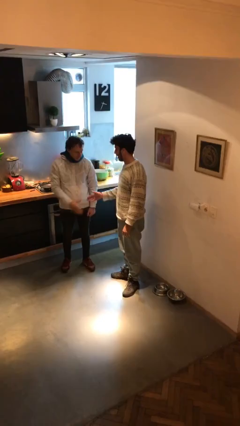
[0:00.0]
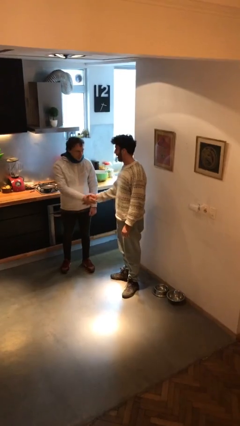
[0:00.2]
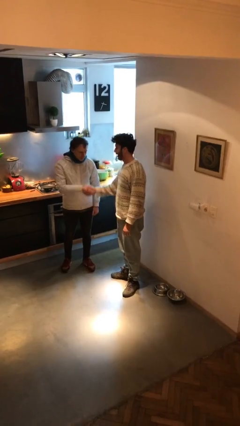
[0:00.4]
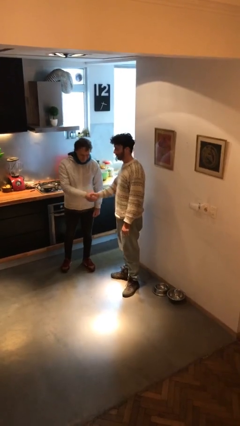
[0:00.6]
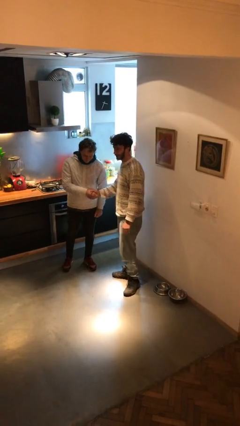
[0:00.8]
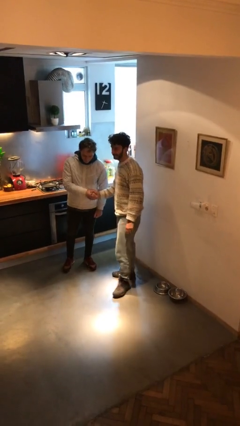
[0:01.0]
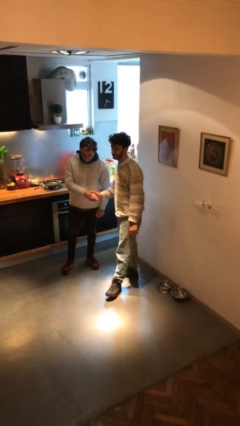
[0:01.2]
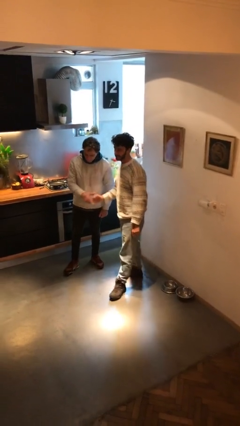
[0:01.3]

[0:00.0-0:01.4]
person shakes hand

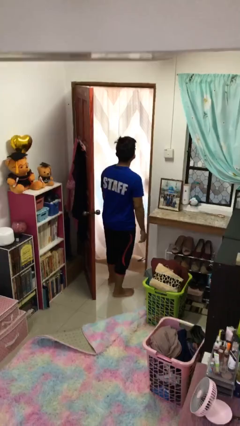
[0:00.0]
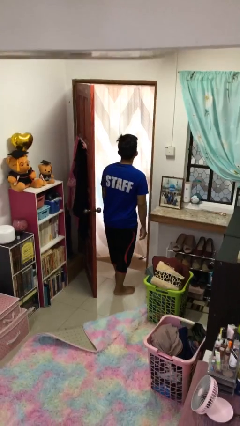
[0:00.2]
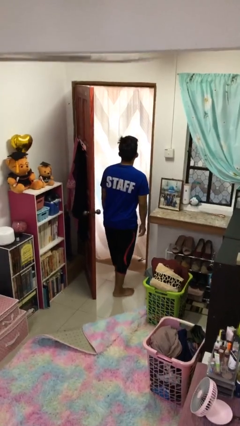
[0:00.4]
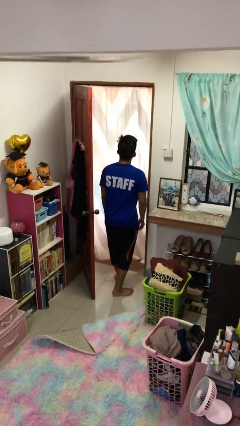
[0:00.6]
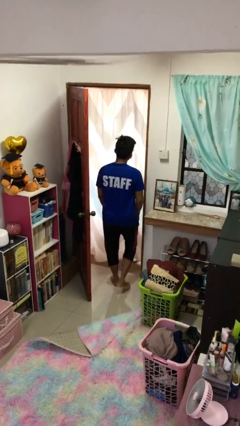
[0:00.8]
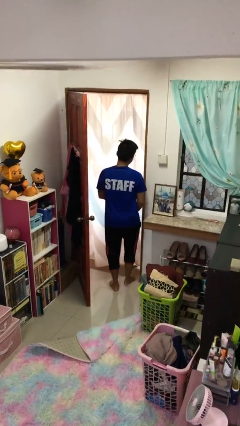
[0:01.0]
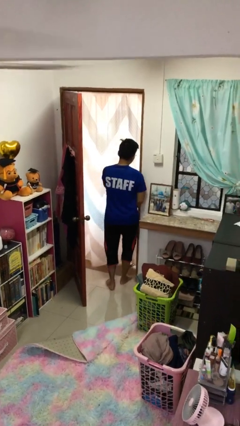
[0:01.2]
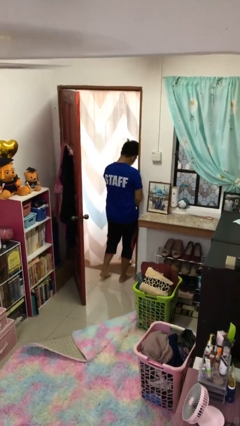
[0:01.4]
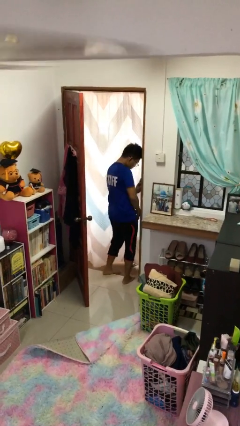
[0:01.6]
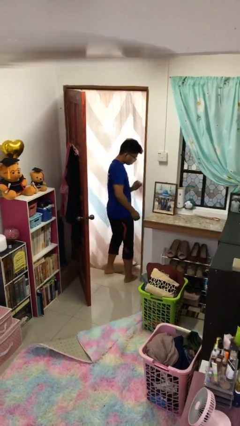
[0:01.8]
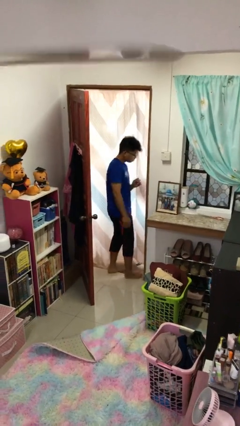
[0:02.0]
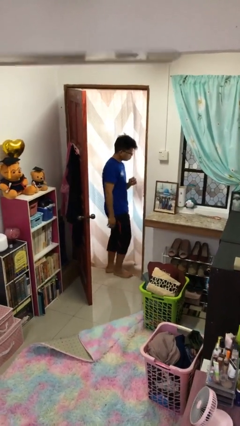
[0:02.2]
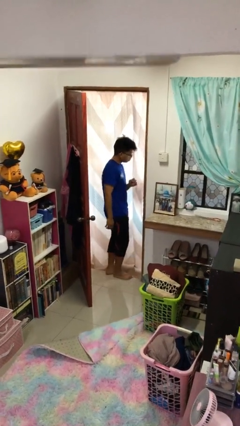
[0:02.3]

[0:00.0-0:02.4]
person bumps into wall

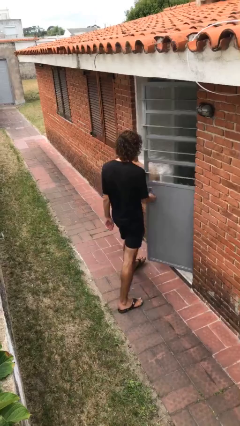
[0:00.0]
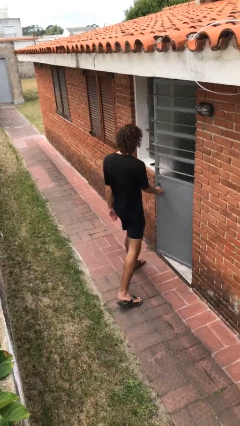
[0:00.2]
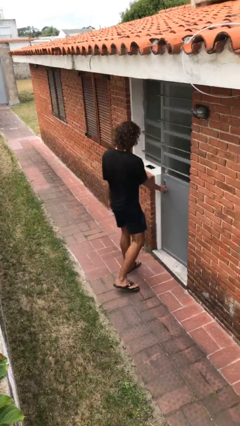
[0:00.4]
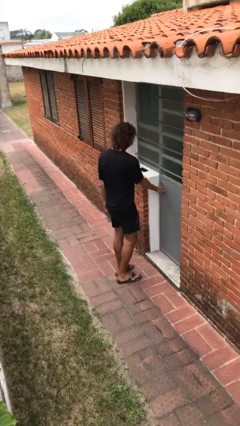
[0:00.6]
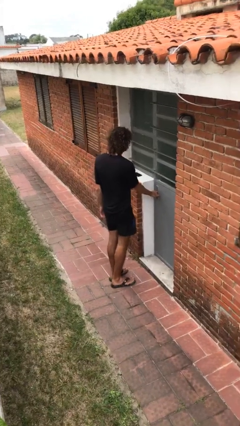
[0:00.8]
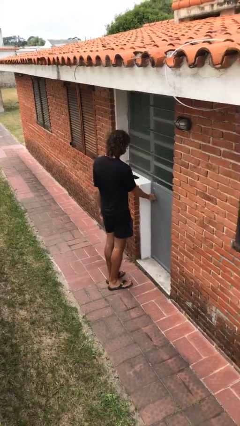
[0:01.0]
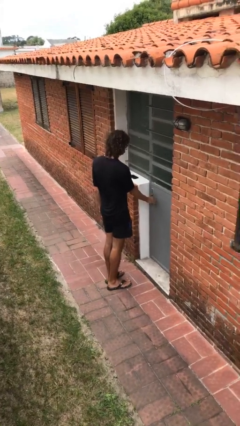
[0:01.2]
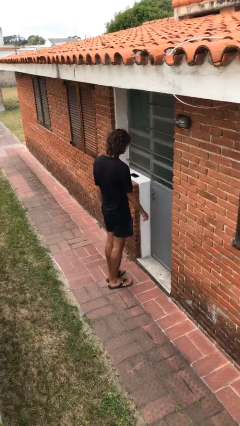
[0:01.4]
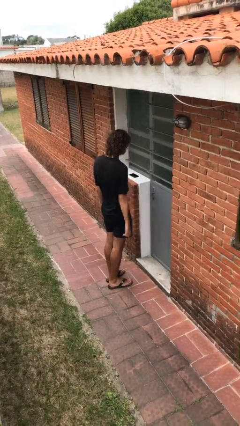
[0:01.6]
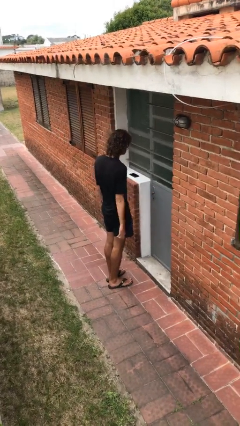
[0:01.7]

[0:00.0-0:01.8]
person closes facility door

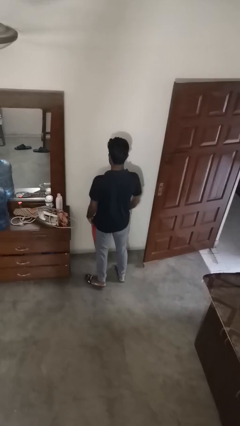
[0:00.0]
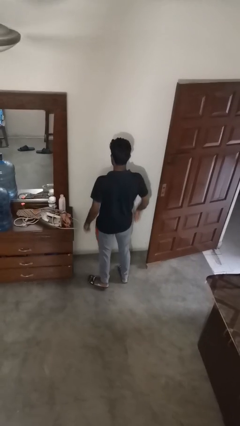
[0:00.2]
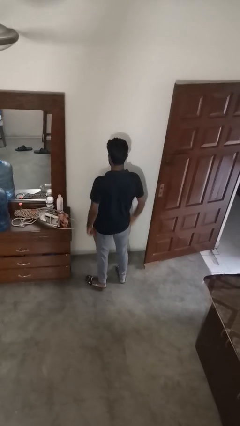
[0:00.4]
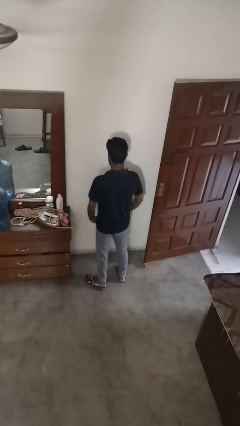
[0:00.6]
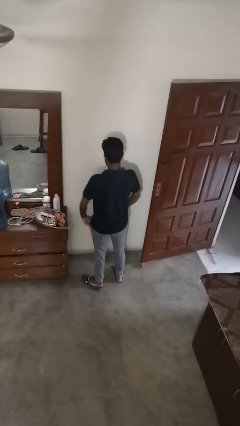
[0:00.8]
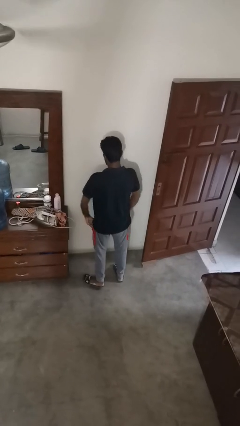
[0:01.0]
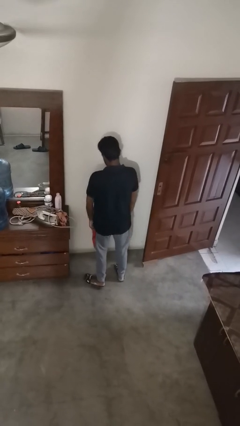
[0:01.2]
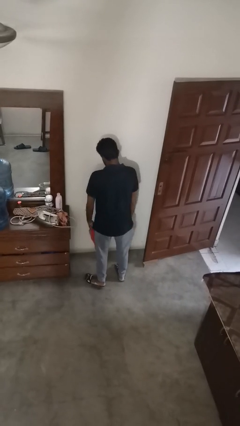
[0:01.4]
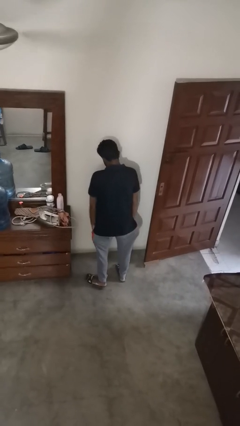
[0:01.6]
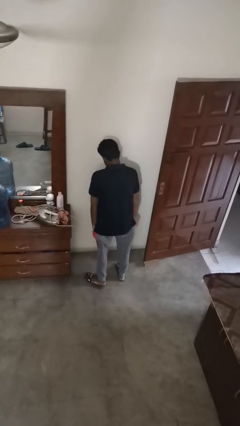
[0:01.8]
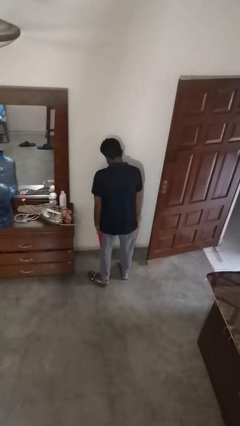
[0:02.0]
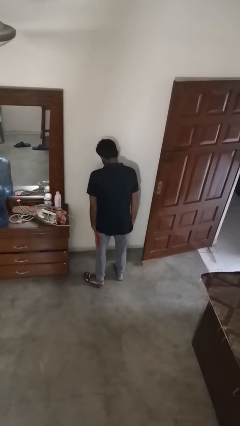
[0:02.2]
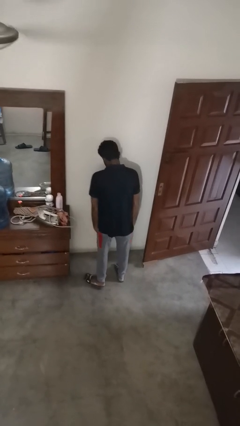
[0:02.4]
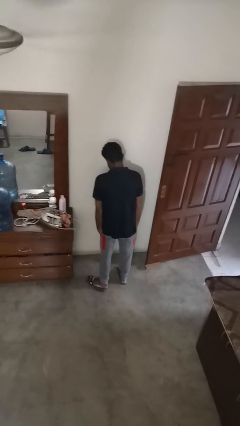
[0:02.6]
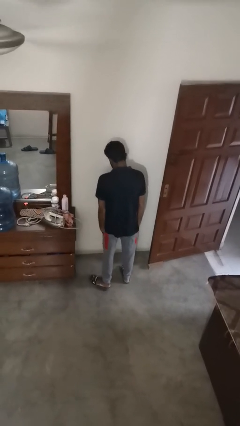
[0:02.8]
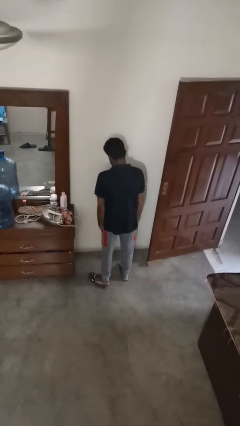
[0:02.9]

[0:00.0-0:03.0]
person puts hands in back pockets

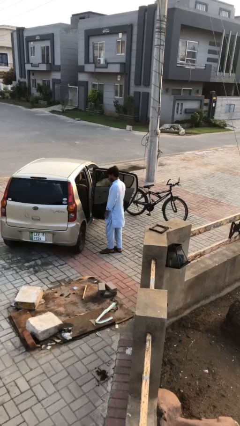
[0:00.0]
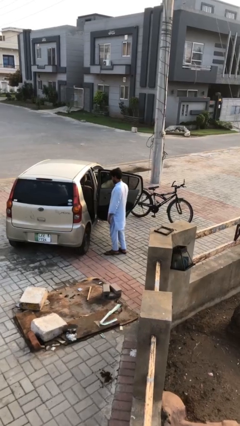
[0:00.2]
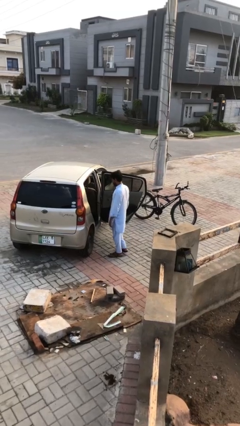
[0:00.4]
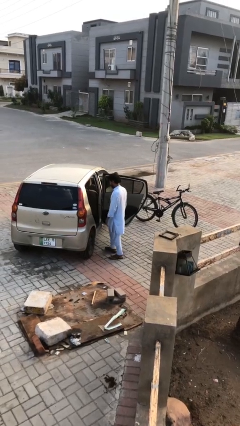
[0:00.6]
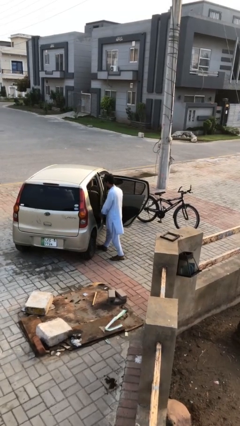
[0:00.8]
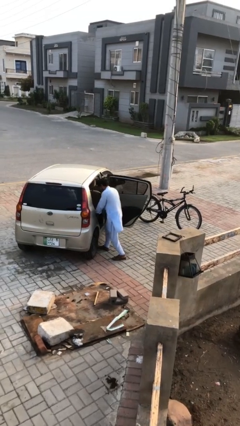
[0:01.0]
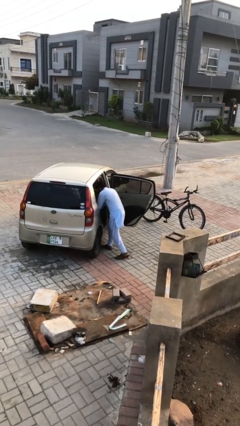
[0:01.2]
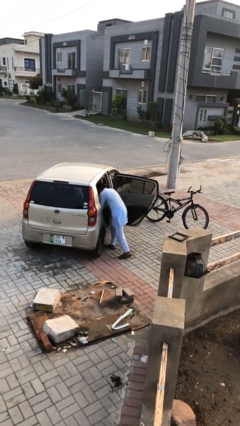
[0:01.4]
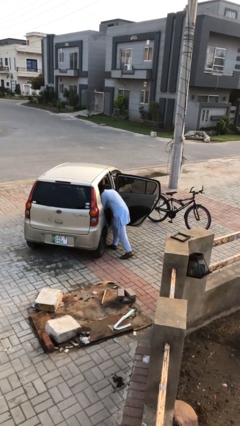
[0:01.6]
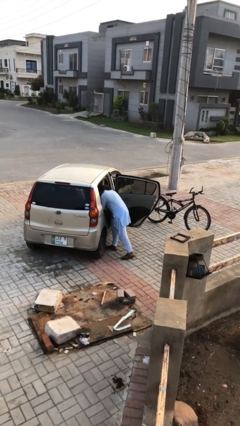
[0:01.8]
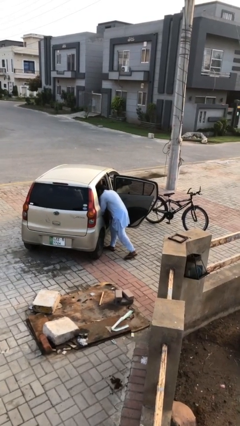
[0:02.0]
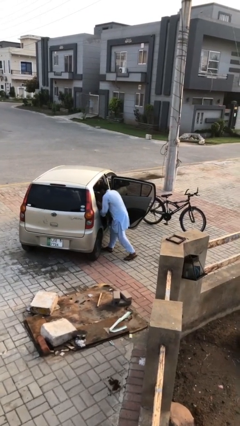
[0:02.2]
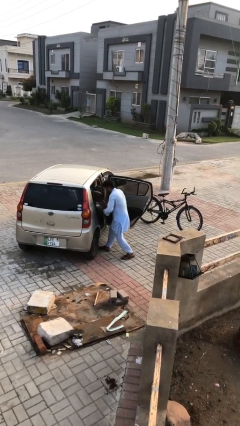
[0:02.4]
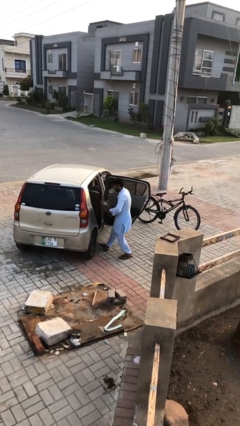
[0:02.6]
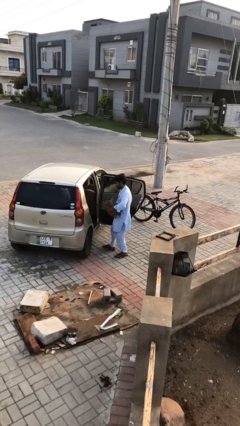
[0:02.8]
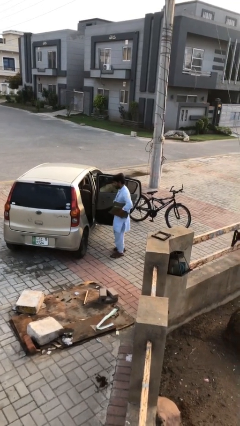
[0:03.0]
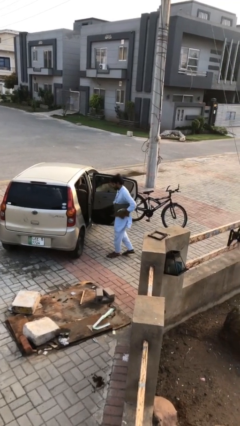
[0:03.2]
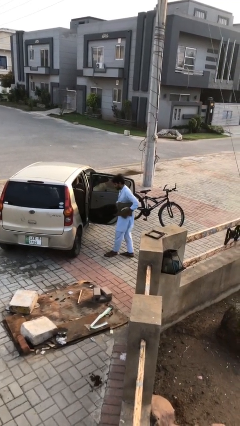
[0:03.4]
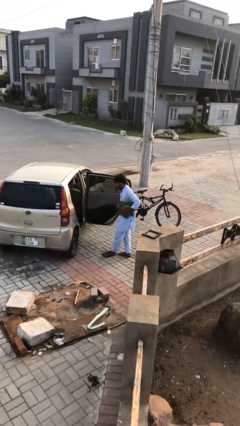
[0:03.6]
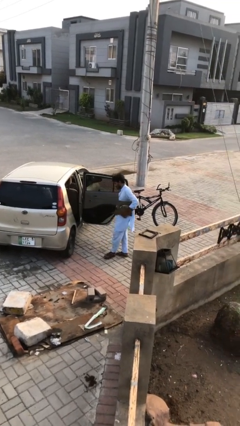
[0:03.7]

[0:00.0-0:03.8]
person unloads car

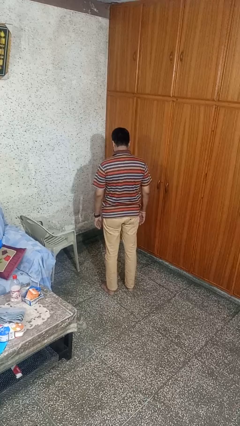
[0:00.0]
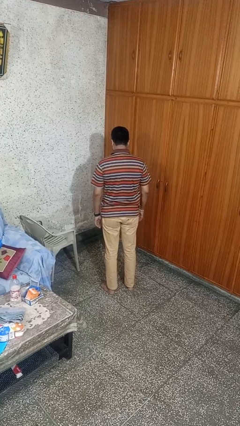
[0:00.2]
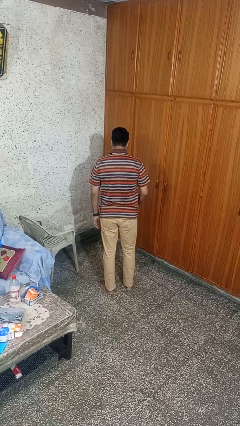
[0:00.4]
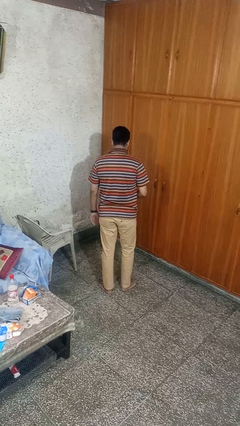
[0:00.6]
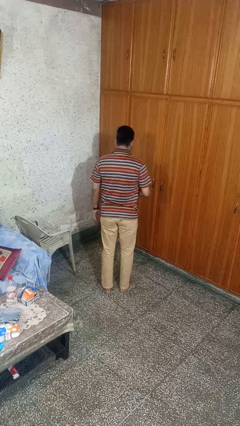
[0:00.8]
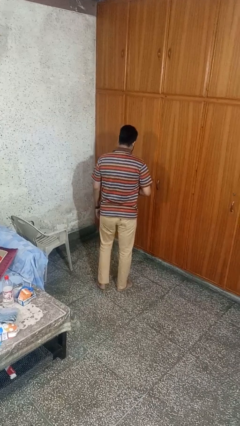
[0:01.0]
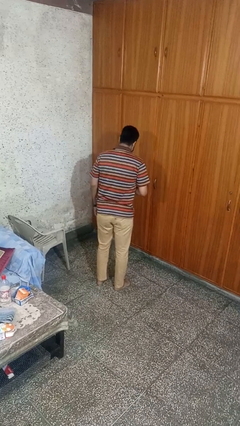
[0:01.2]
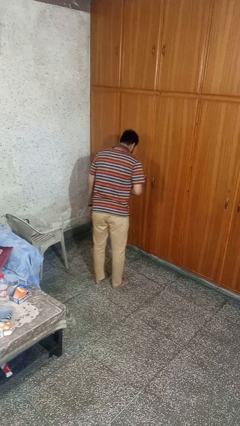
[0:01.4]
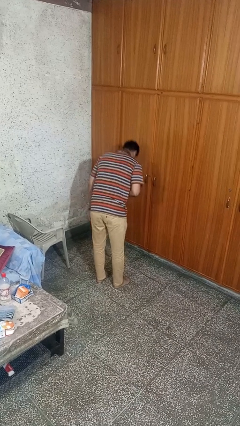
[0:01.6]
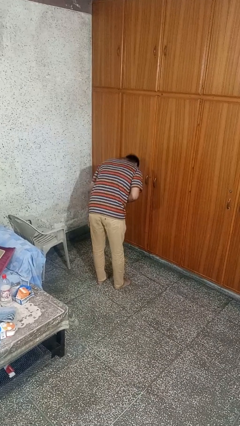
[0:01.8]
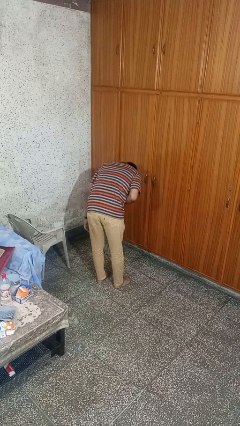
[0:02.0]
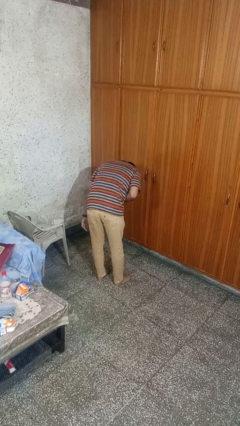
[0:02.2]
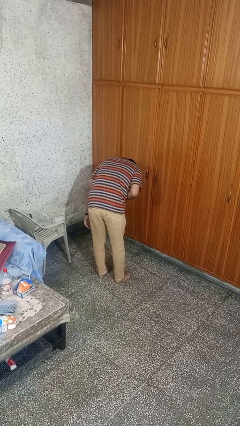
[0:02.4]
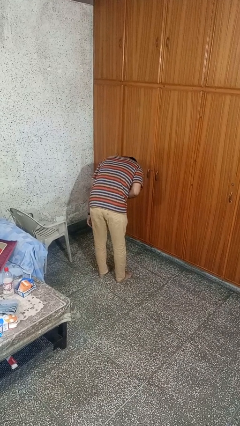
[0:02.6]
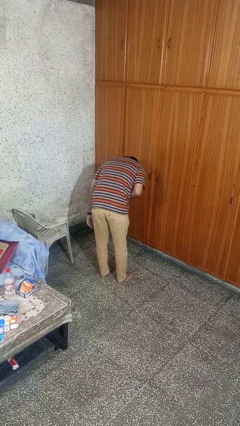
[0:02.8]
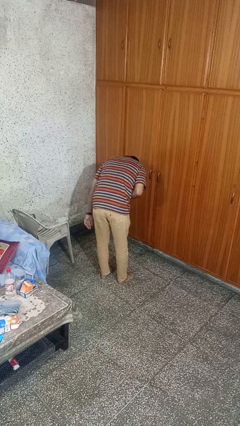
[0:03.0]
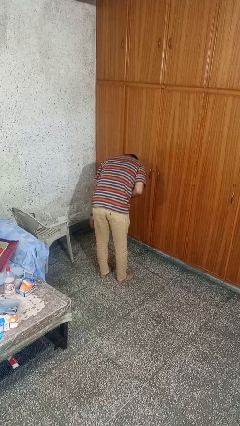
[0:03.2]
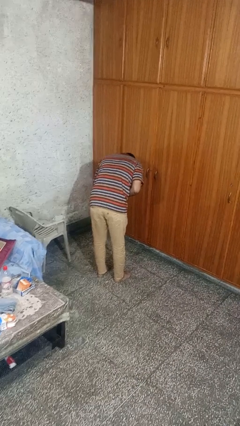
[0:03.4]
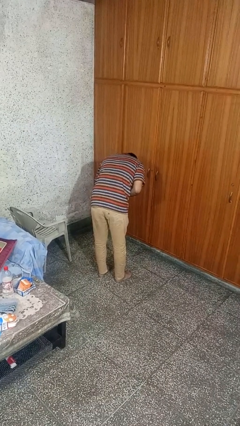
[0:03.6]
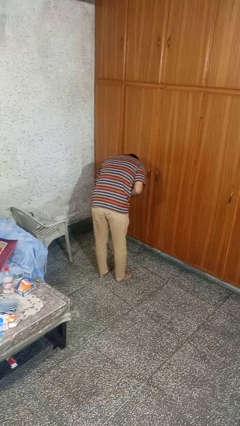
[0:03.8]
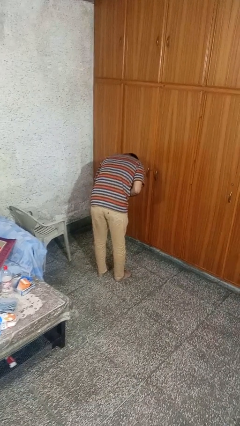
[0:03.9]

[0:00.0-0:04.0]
person bows

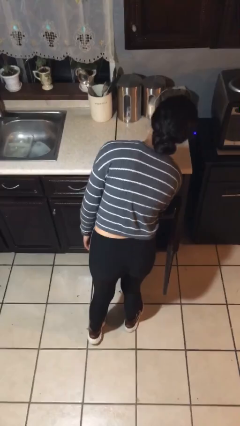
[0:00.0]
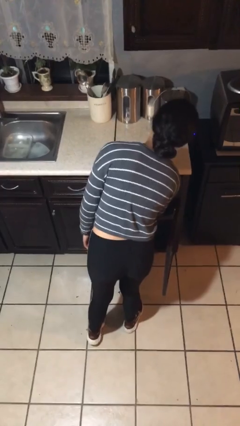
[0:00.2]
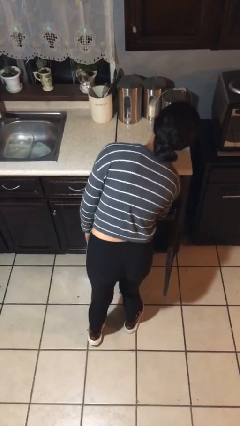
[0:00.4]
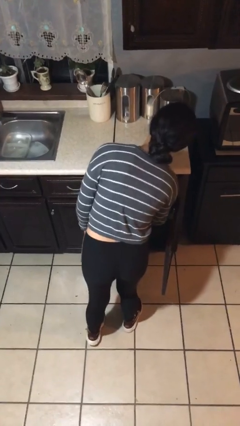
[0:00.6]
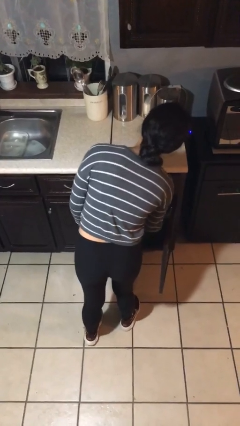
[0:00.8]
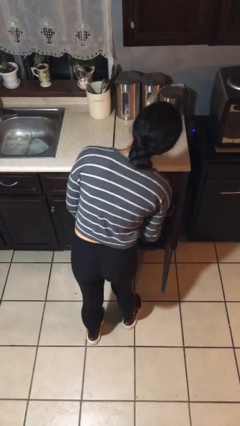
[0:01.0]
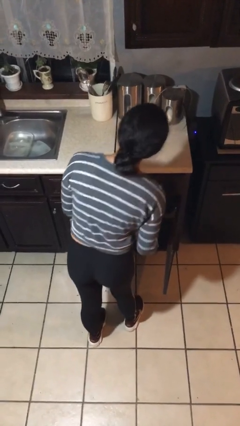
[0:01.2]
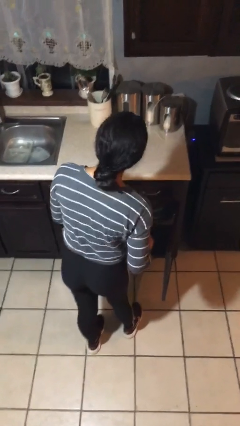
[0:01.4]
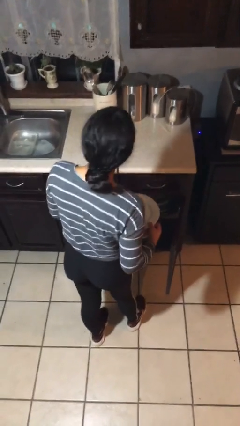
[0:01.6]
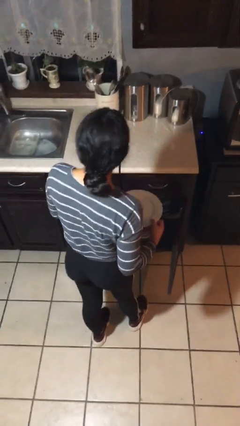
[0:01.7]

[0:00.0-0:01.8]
person puts object in cabinet
